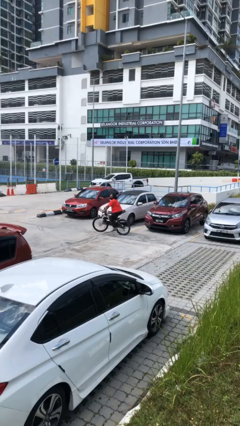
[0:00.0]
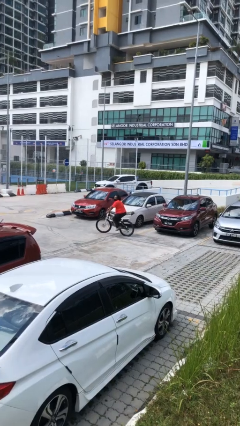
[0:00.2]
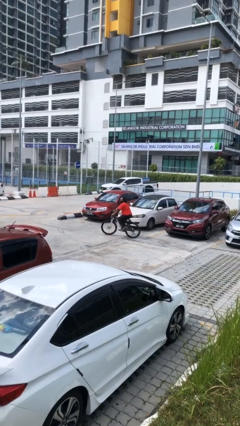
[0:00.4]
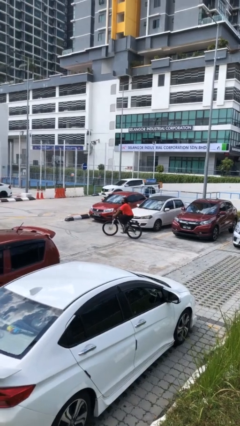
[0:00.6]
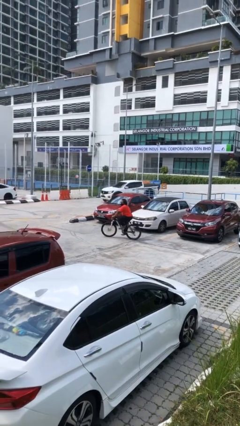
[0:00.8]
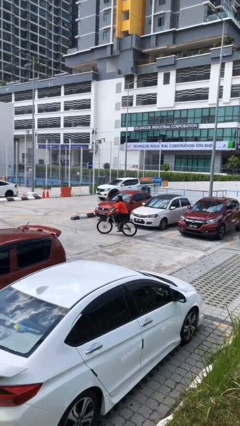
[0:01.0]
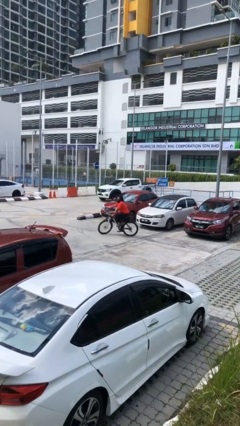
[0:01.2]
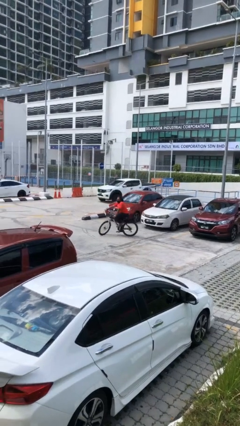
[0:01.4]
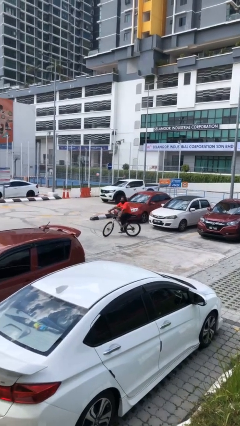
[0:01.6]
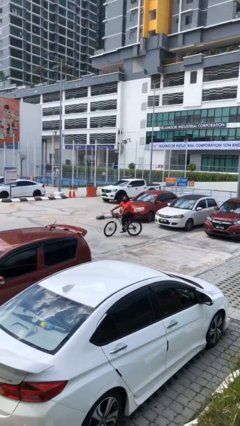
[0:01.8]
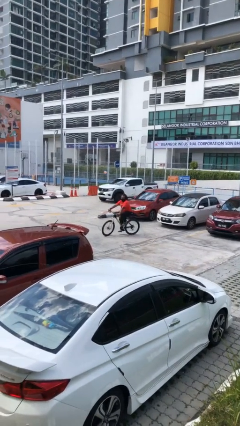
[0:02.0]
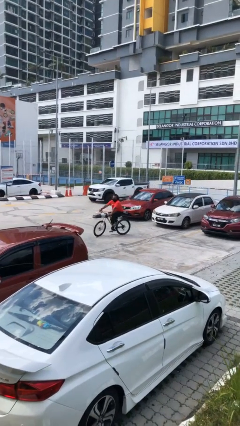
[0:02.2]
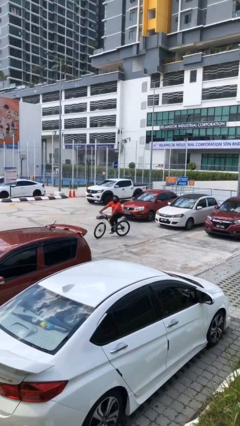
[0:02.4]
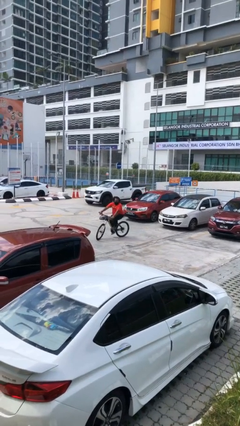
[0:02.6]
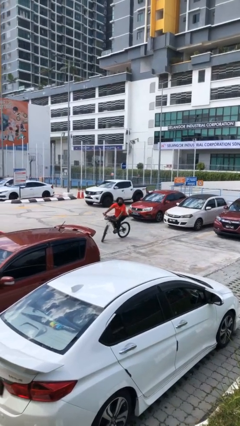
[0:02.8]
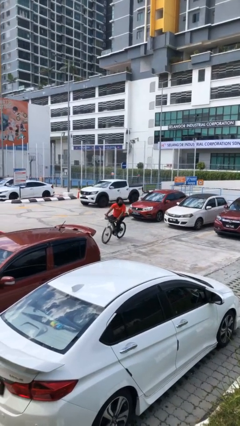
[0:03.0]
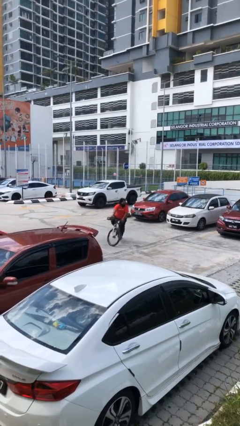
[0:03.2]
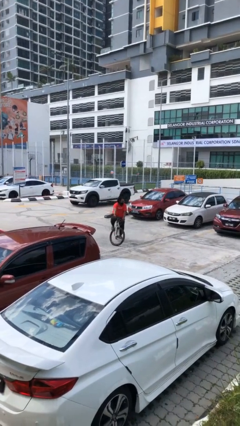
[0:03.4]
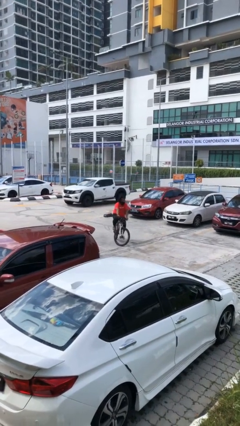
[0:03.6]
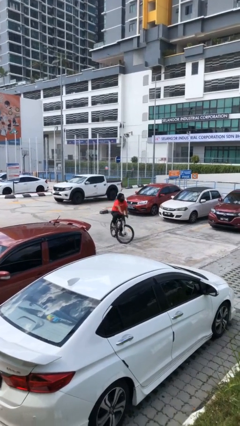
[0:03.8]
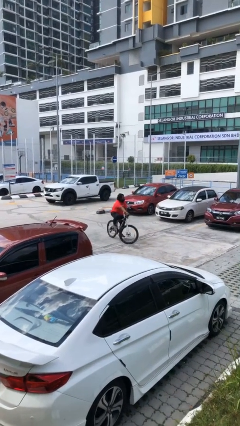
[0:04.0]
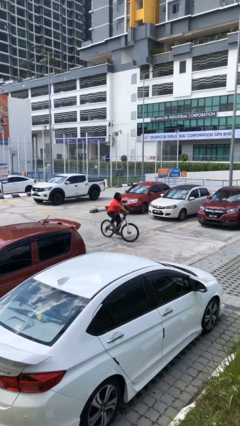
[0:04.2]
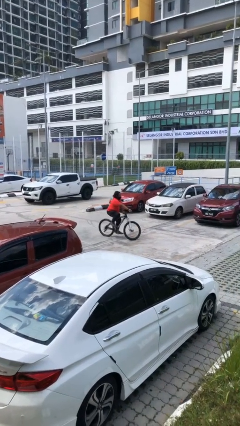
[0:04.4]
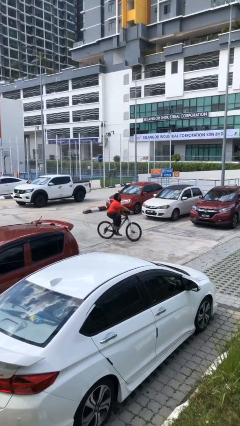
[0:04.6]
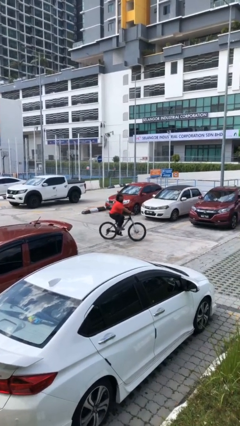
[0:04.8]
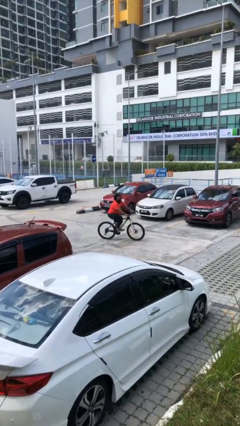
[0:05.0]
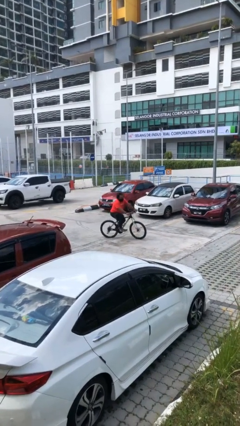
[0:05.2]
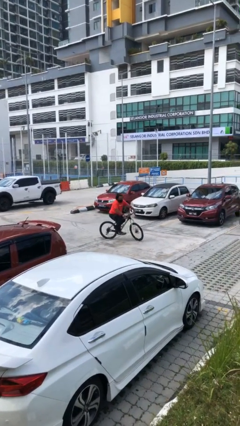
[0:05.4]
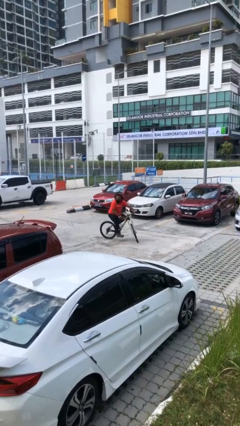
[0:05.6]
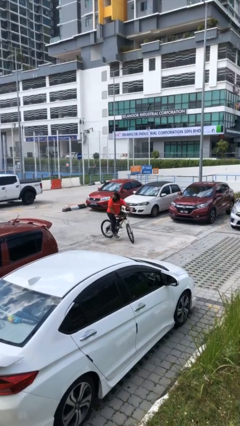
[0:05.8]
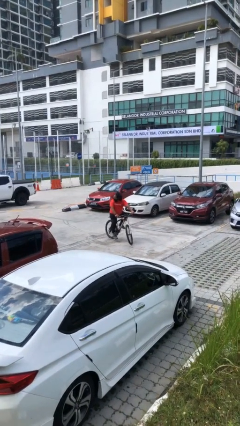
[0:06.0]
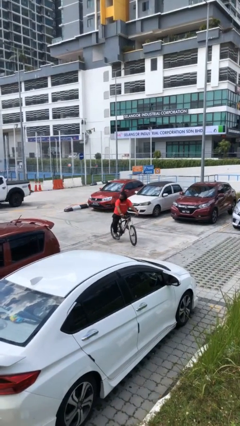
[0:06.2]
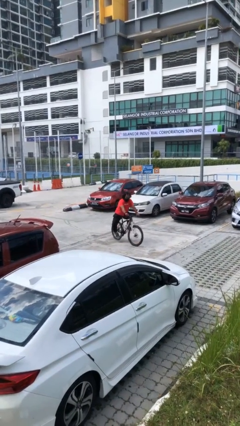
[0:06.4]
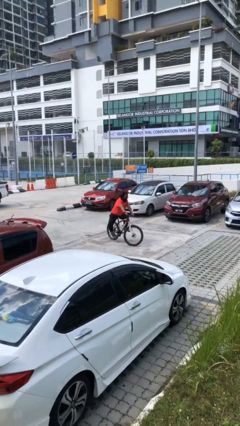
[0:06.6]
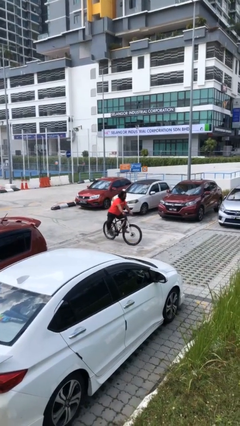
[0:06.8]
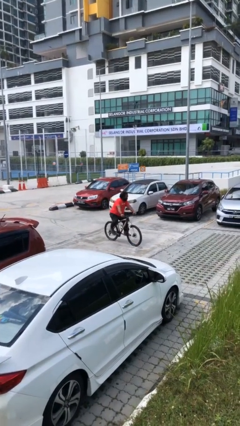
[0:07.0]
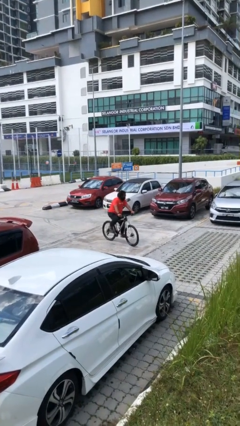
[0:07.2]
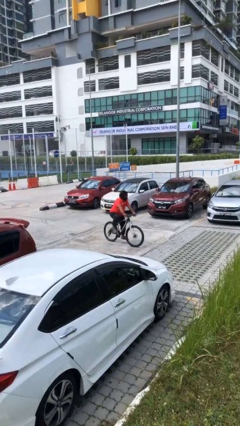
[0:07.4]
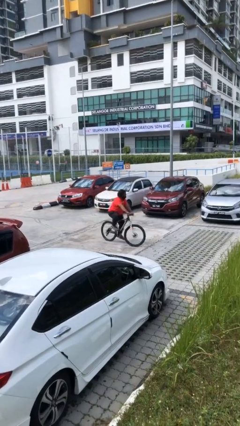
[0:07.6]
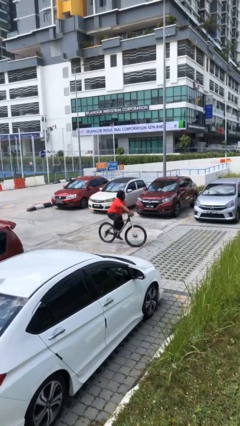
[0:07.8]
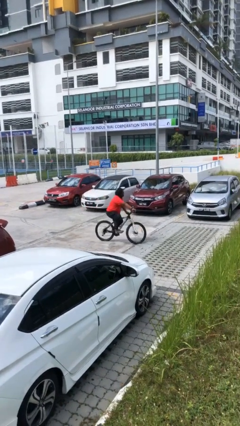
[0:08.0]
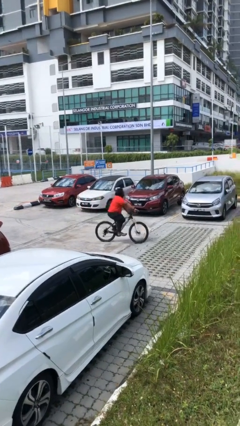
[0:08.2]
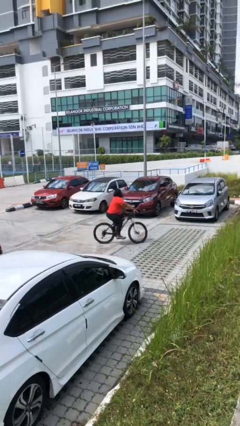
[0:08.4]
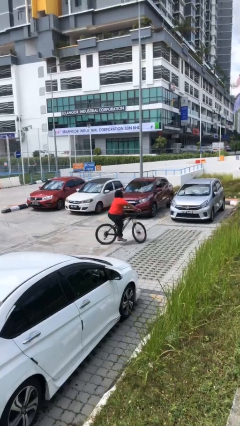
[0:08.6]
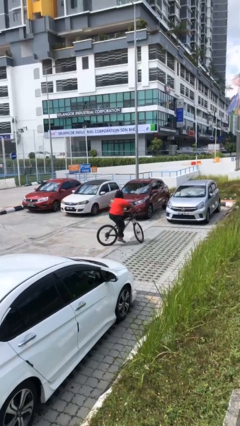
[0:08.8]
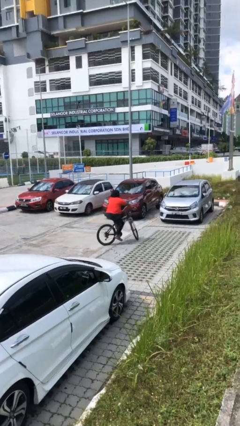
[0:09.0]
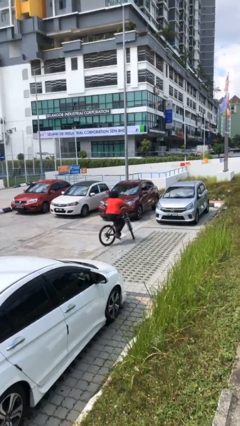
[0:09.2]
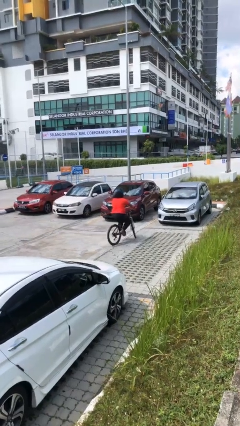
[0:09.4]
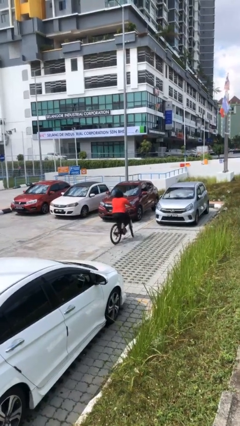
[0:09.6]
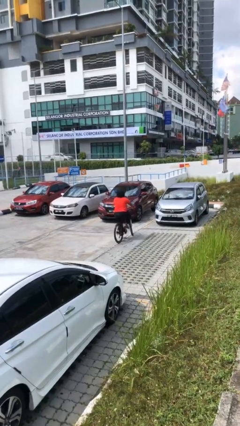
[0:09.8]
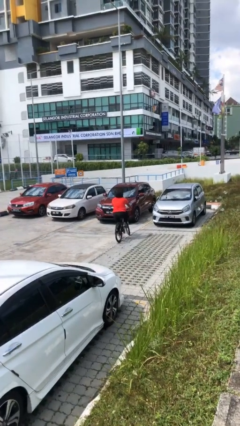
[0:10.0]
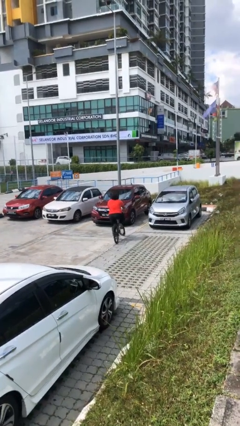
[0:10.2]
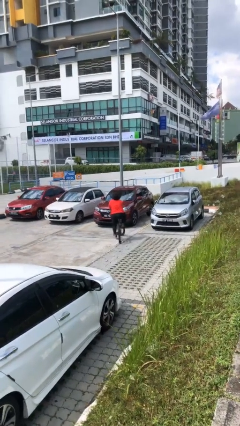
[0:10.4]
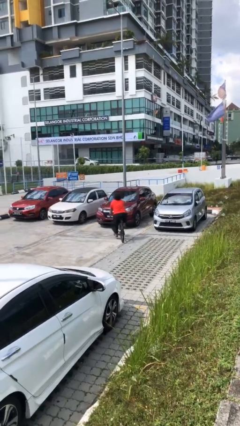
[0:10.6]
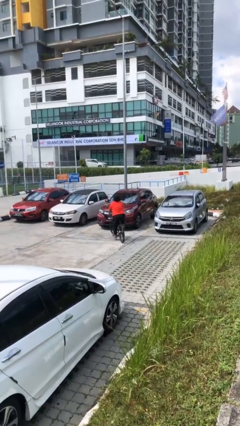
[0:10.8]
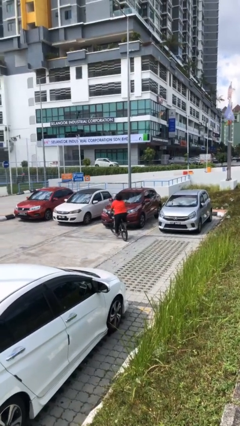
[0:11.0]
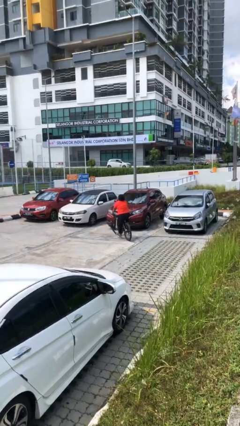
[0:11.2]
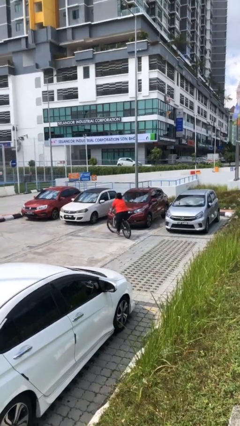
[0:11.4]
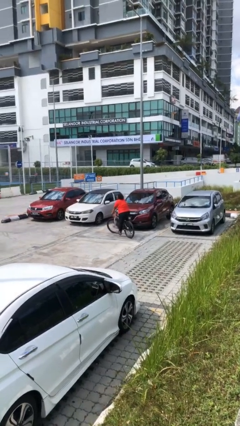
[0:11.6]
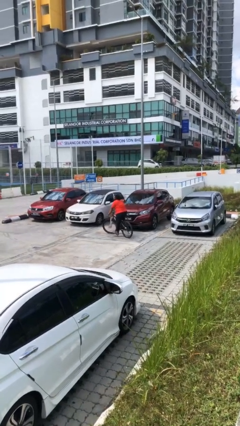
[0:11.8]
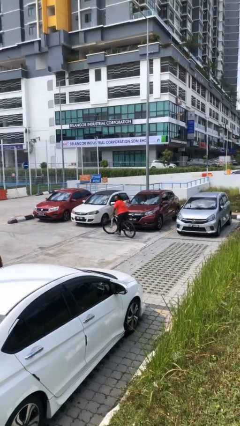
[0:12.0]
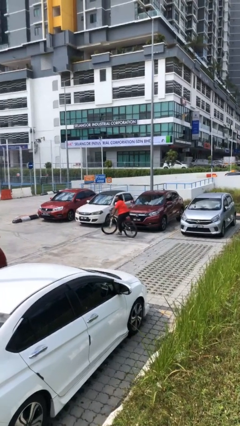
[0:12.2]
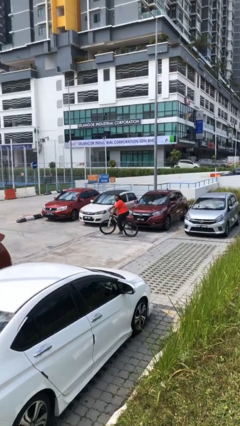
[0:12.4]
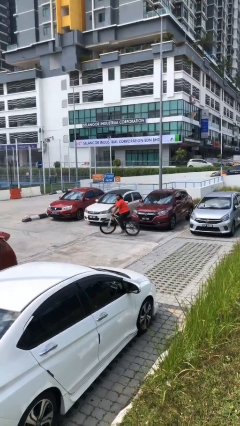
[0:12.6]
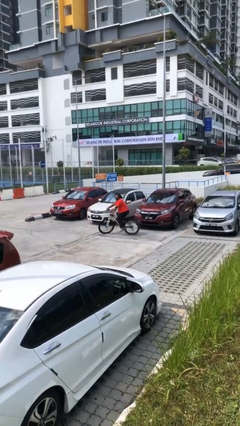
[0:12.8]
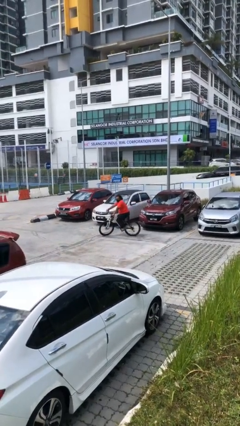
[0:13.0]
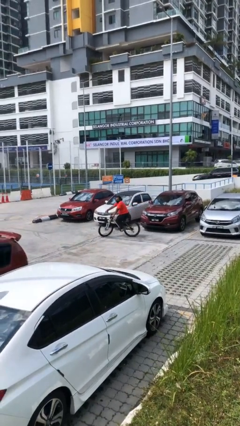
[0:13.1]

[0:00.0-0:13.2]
person rides bicycle

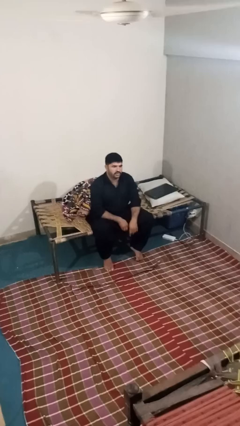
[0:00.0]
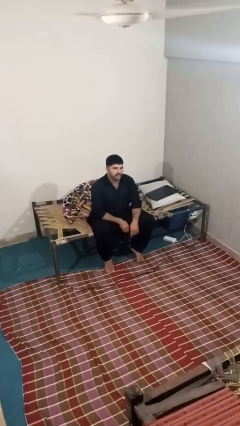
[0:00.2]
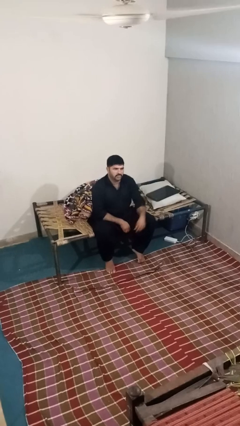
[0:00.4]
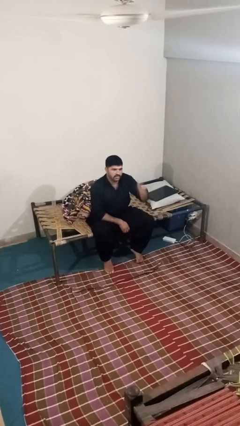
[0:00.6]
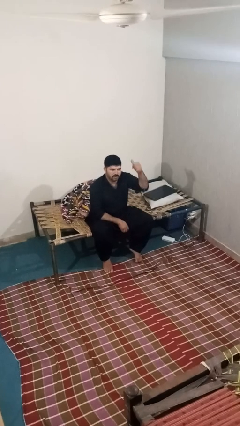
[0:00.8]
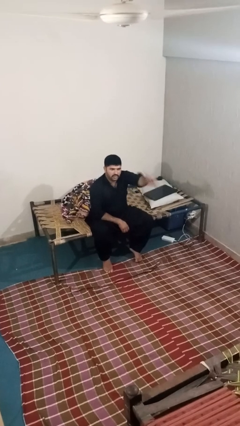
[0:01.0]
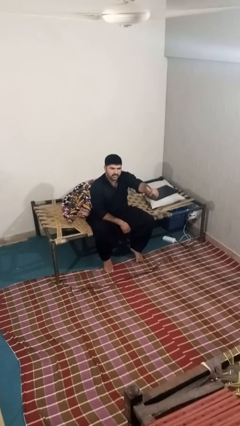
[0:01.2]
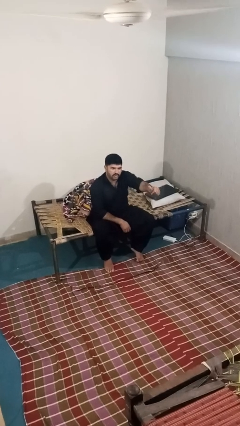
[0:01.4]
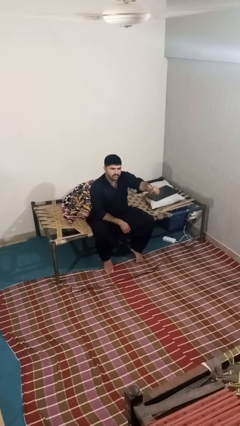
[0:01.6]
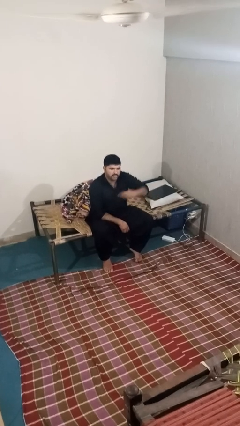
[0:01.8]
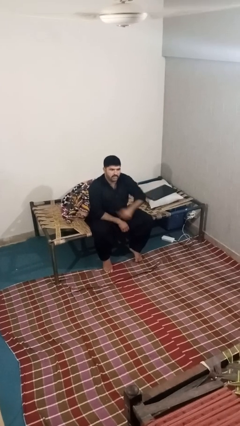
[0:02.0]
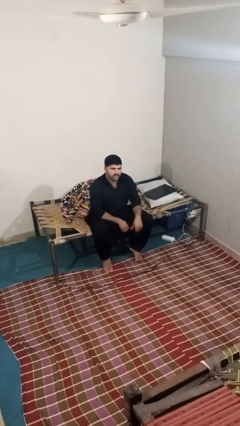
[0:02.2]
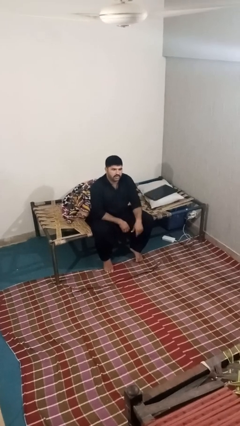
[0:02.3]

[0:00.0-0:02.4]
person gestures thumbs up

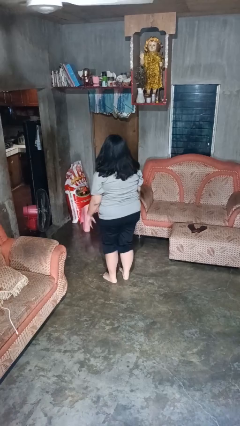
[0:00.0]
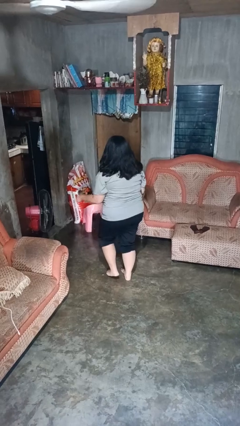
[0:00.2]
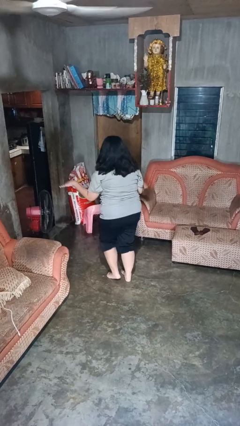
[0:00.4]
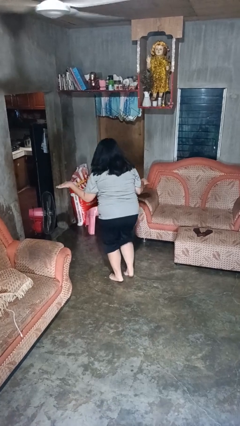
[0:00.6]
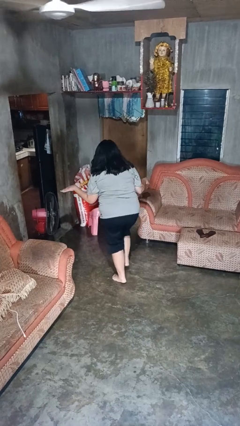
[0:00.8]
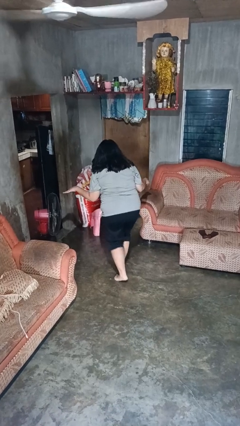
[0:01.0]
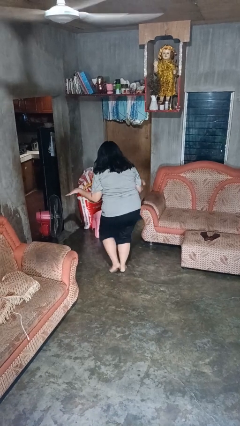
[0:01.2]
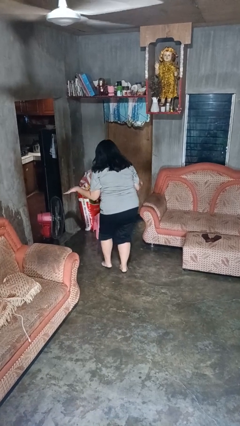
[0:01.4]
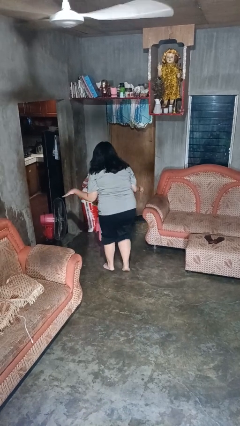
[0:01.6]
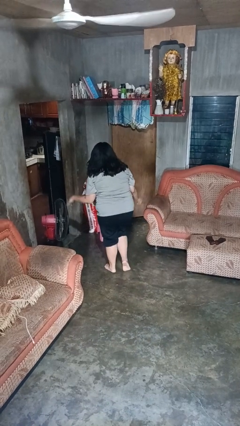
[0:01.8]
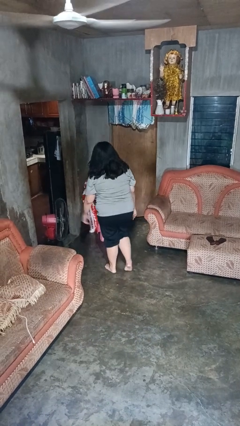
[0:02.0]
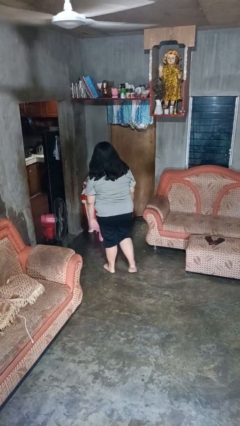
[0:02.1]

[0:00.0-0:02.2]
person walks tiptoe
